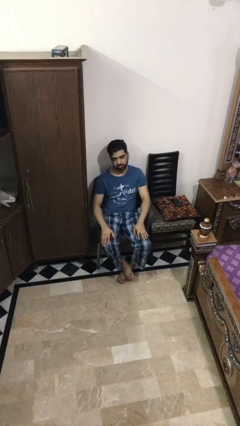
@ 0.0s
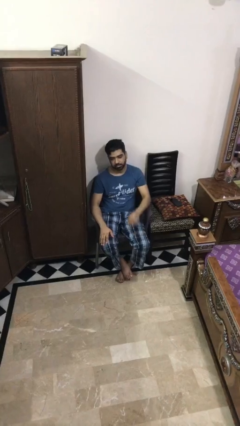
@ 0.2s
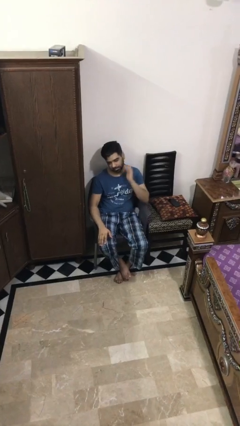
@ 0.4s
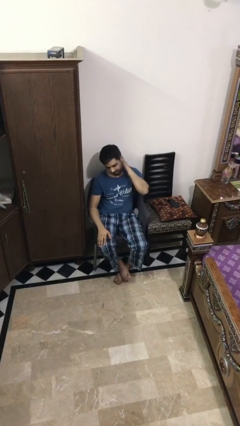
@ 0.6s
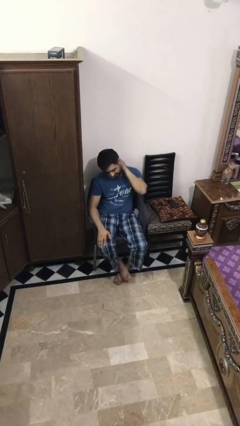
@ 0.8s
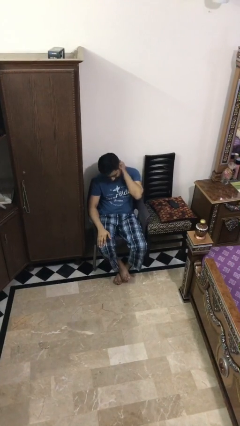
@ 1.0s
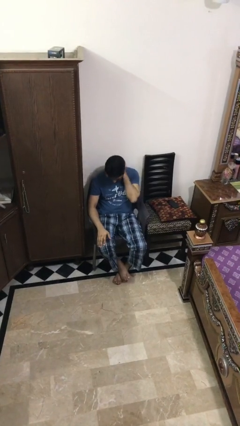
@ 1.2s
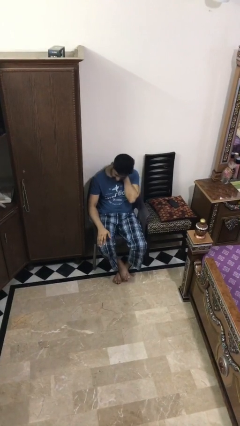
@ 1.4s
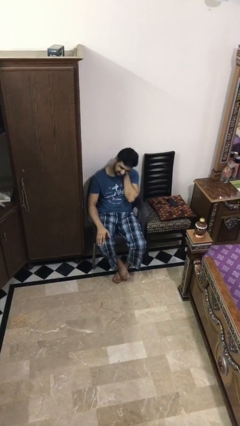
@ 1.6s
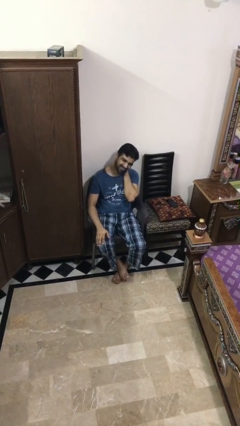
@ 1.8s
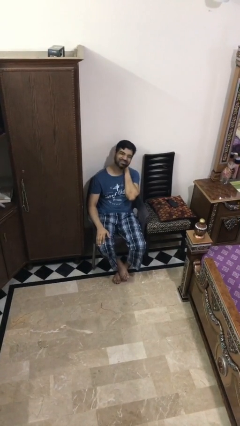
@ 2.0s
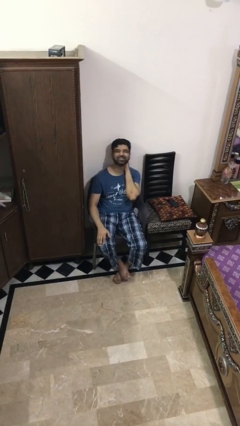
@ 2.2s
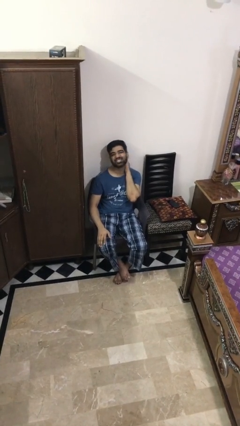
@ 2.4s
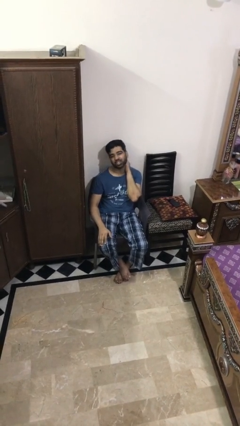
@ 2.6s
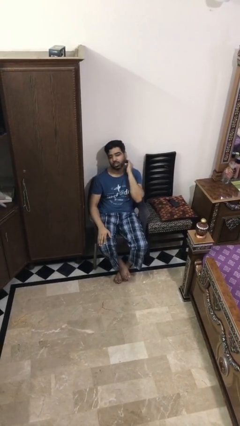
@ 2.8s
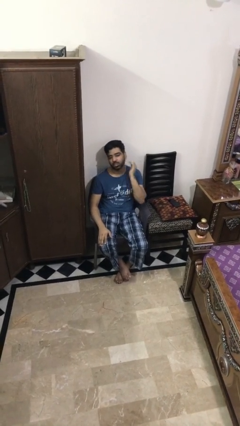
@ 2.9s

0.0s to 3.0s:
person rubs neck

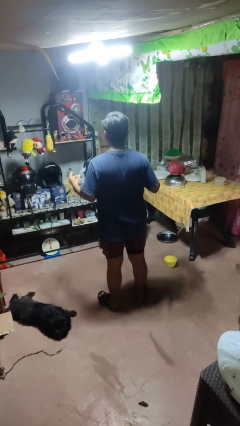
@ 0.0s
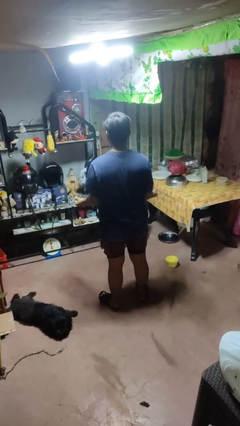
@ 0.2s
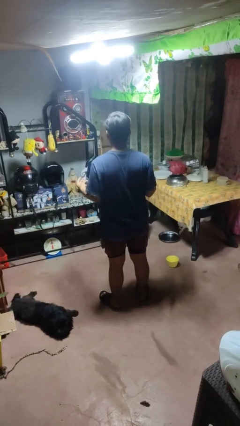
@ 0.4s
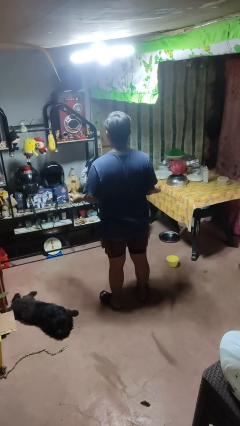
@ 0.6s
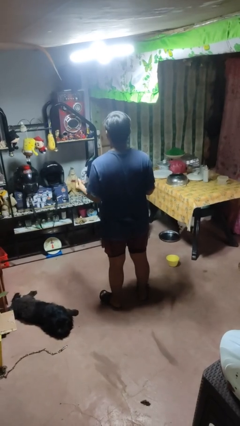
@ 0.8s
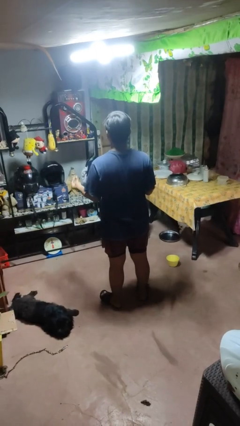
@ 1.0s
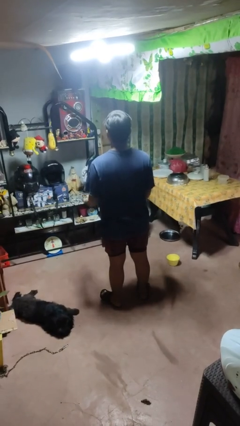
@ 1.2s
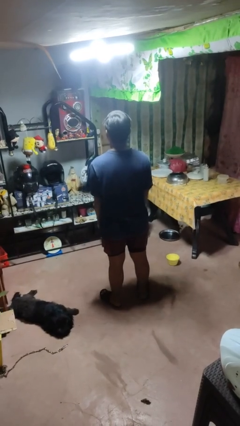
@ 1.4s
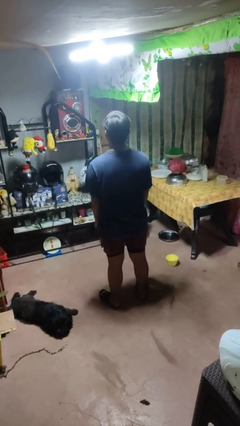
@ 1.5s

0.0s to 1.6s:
person snaps fingers

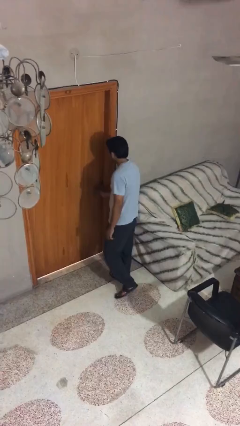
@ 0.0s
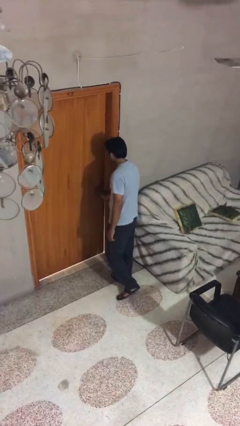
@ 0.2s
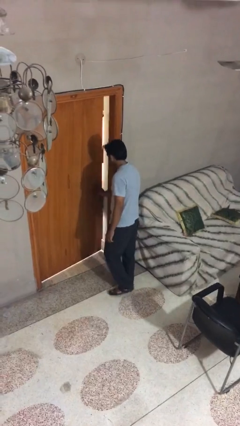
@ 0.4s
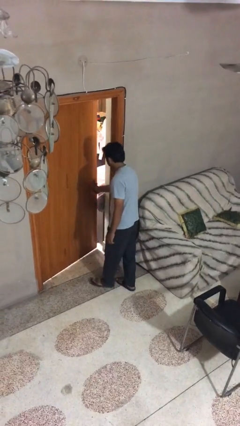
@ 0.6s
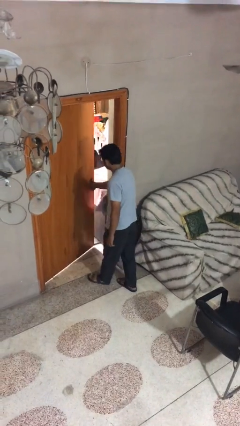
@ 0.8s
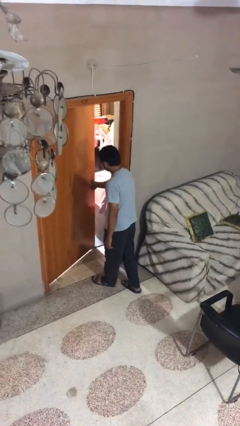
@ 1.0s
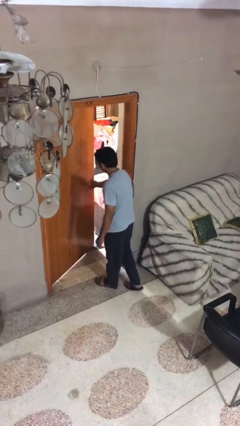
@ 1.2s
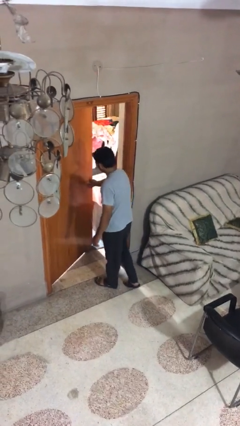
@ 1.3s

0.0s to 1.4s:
person opens facility door

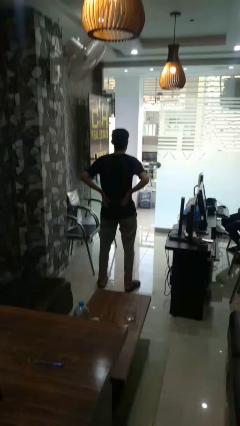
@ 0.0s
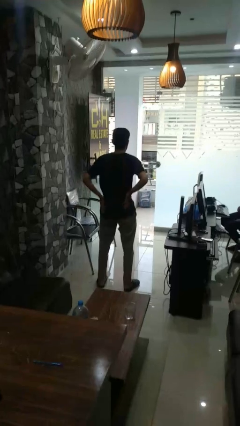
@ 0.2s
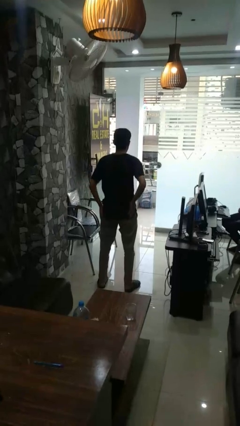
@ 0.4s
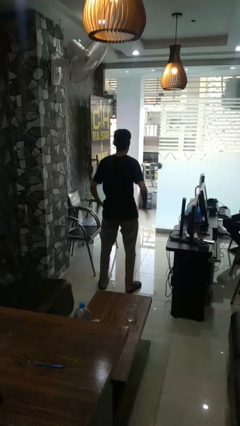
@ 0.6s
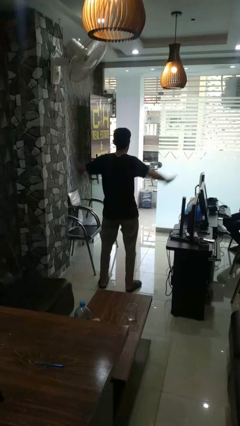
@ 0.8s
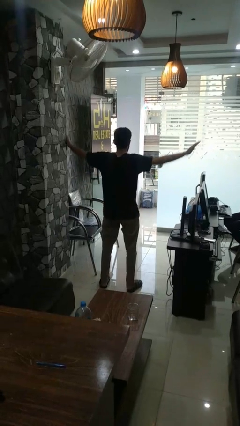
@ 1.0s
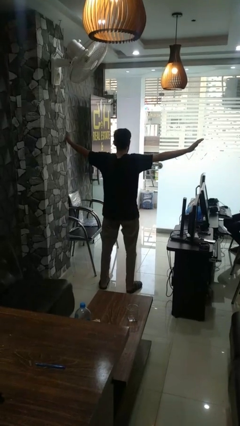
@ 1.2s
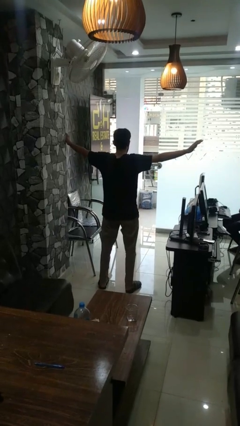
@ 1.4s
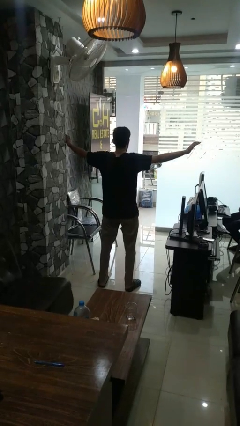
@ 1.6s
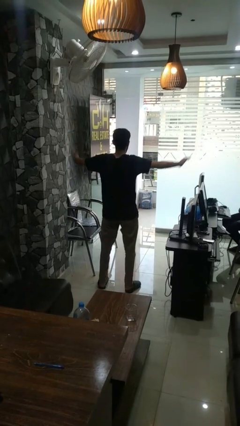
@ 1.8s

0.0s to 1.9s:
person stretches arms to side

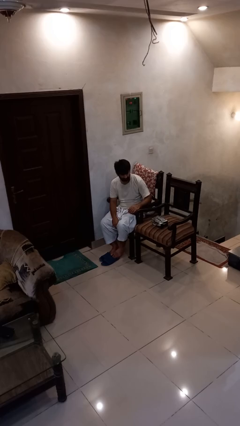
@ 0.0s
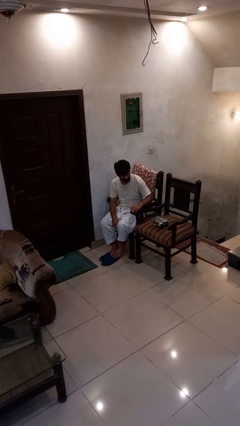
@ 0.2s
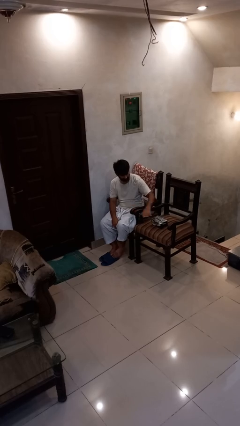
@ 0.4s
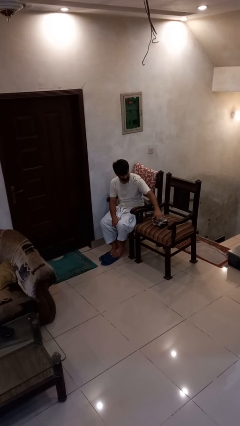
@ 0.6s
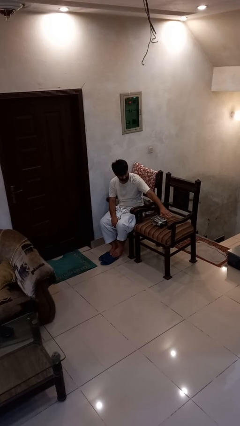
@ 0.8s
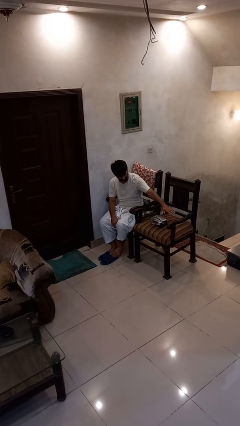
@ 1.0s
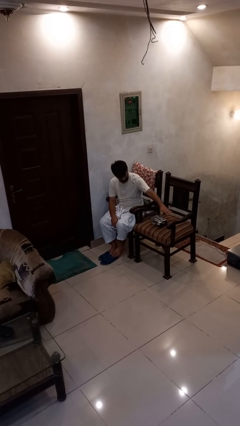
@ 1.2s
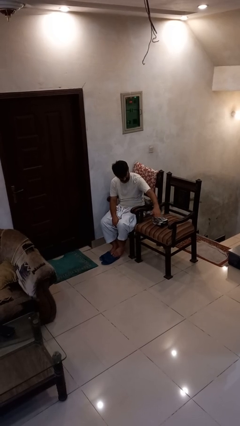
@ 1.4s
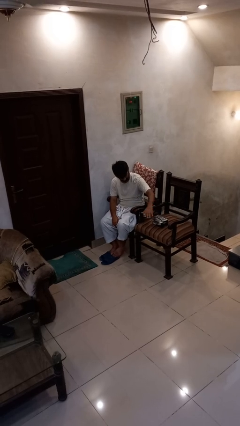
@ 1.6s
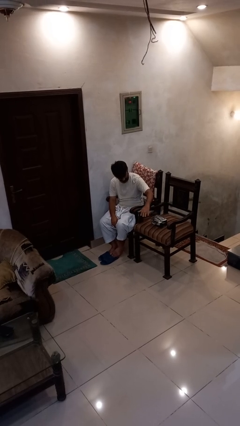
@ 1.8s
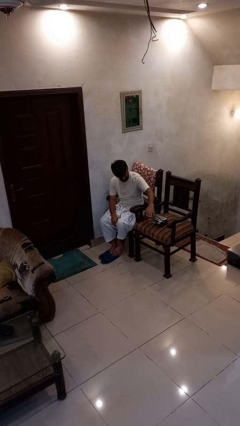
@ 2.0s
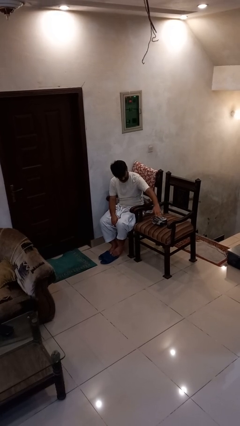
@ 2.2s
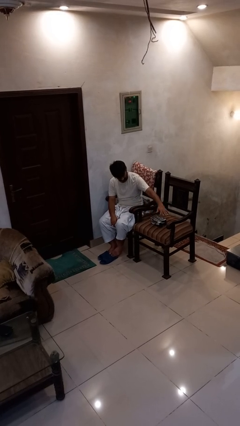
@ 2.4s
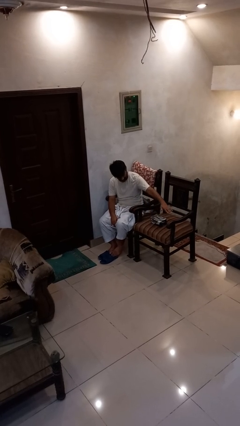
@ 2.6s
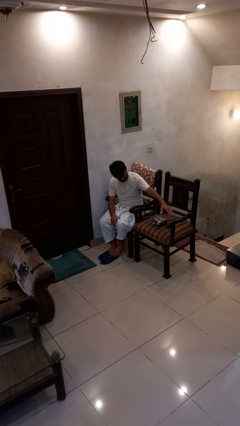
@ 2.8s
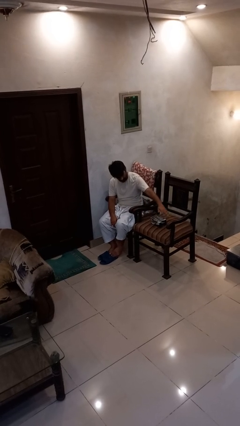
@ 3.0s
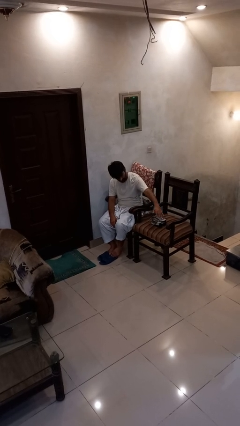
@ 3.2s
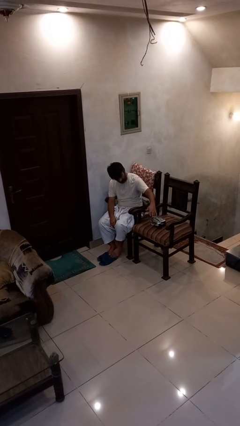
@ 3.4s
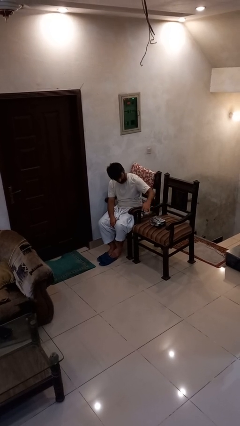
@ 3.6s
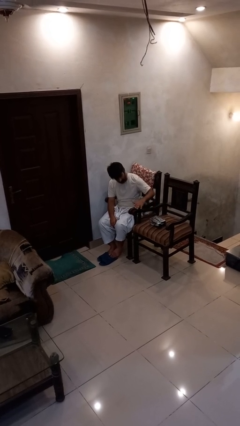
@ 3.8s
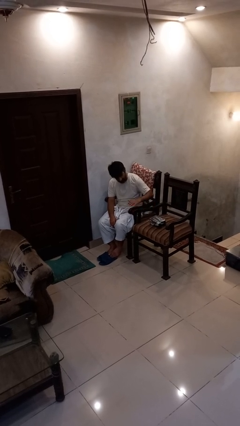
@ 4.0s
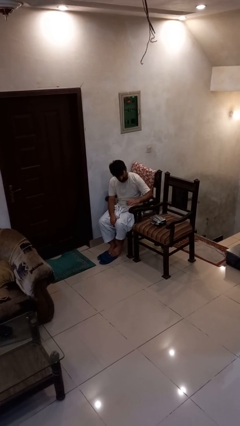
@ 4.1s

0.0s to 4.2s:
person waves hand over object

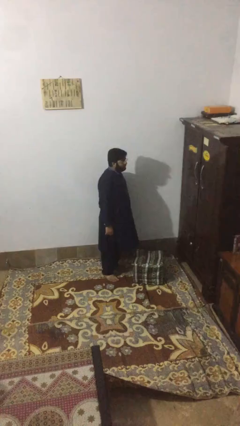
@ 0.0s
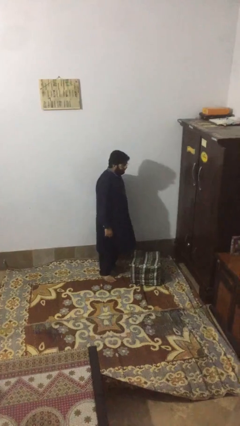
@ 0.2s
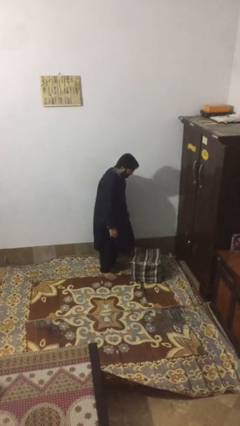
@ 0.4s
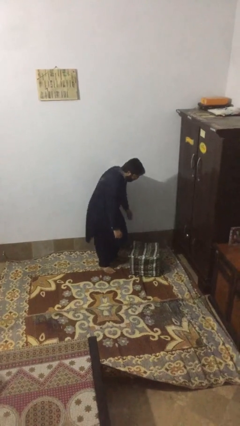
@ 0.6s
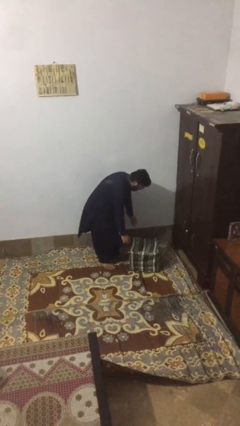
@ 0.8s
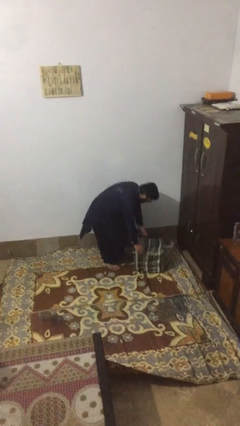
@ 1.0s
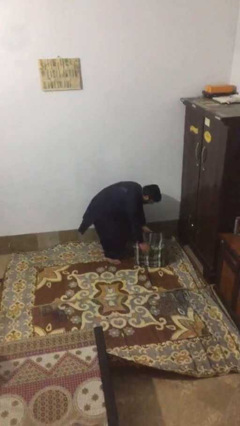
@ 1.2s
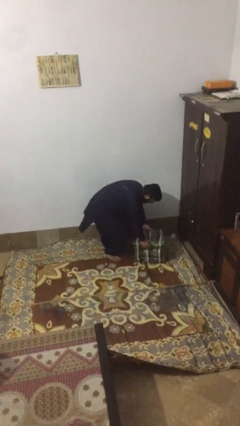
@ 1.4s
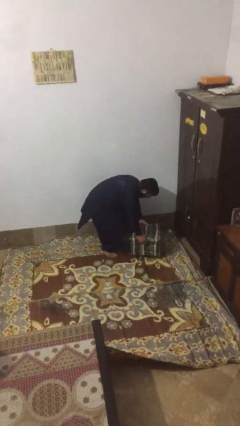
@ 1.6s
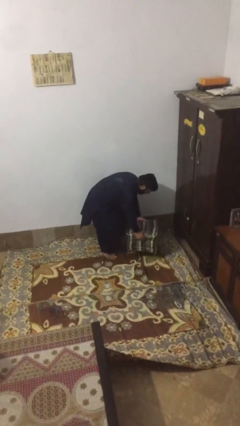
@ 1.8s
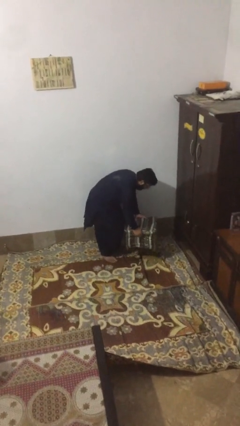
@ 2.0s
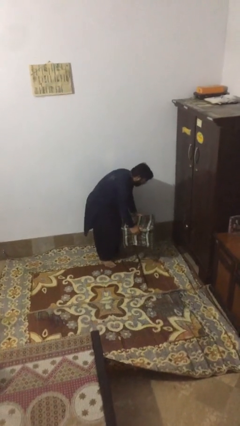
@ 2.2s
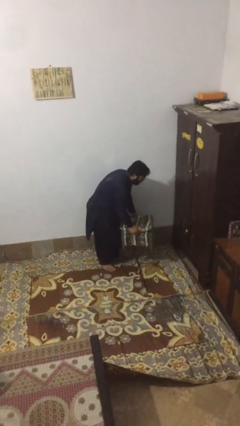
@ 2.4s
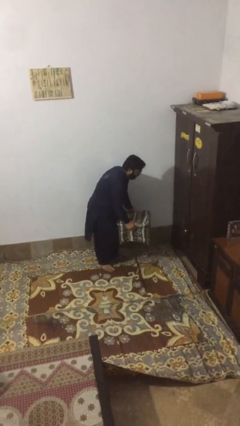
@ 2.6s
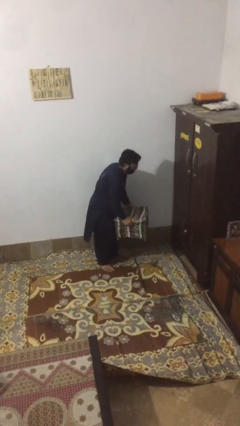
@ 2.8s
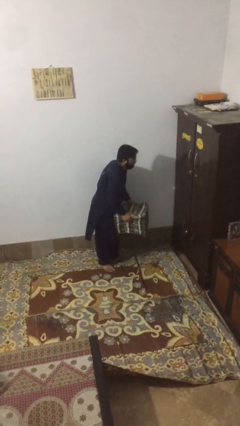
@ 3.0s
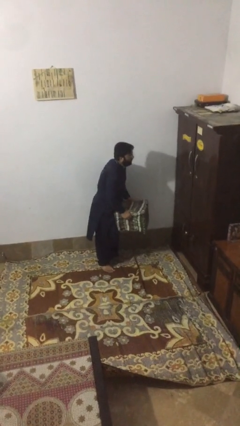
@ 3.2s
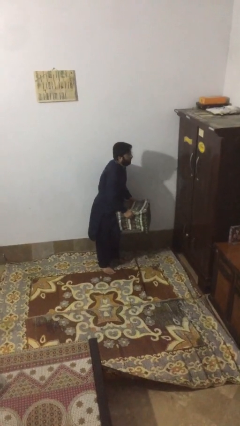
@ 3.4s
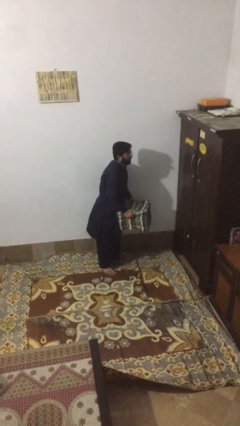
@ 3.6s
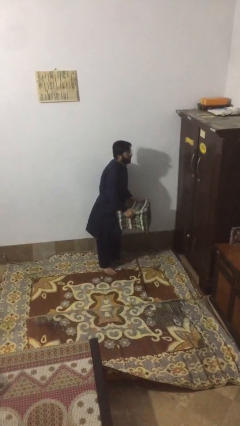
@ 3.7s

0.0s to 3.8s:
person picks up object from floor

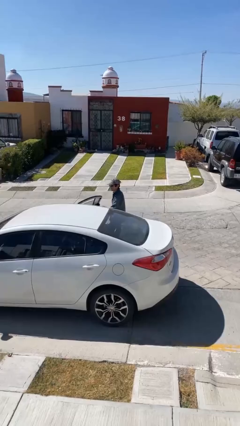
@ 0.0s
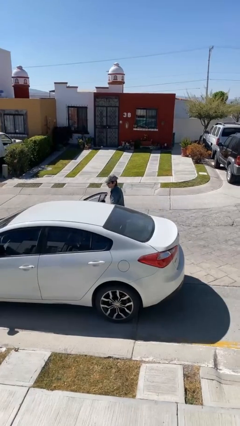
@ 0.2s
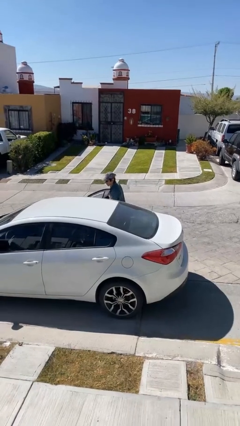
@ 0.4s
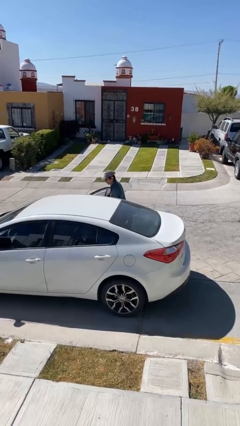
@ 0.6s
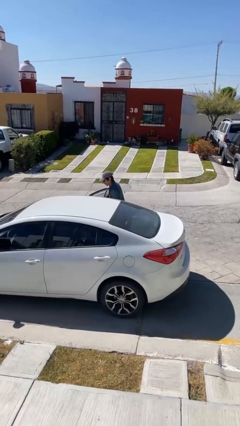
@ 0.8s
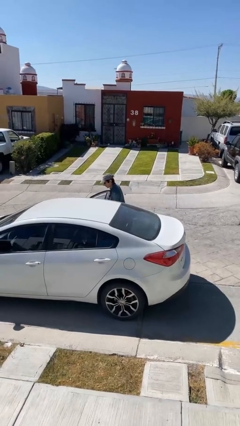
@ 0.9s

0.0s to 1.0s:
person loads car
